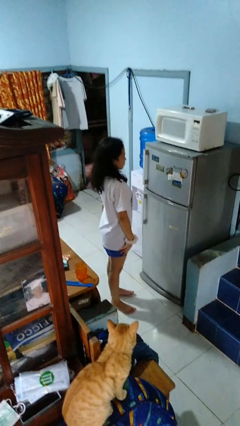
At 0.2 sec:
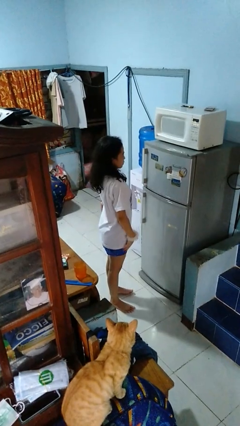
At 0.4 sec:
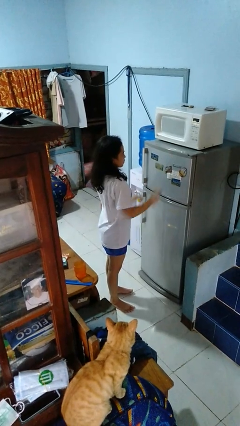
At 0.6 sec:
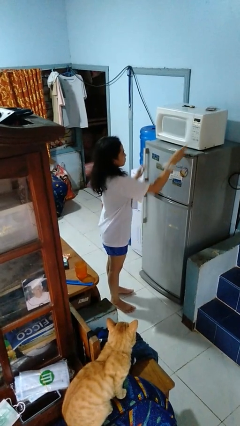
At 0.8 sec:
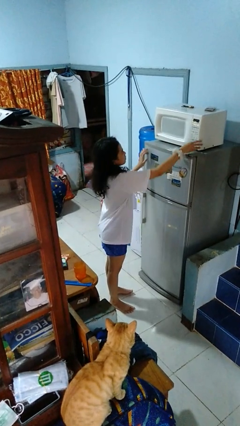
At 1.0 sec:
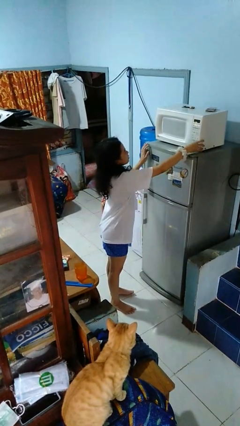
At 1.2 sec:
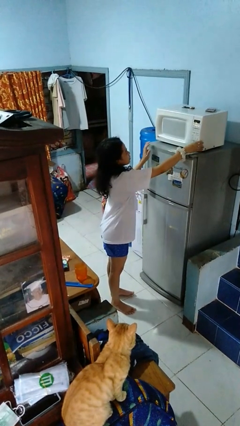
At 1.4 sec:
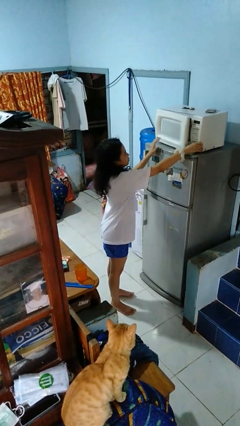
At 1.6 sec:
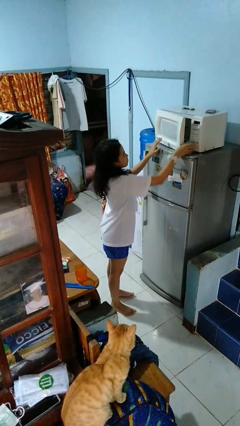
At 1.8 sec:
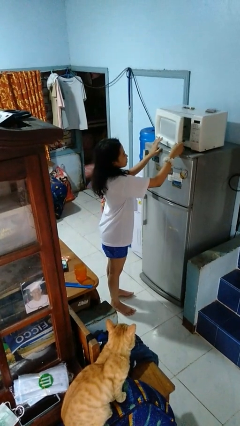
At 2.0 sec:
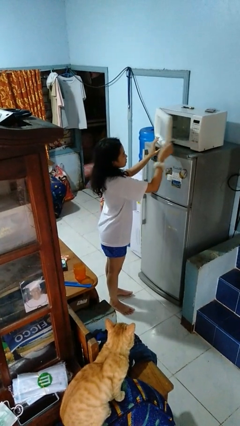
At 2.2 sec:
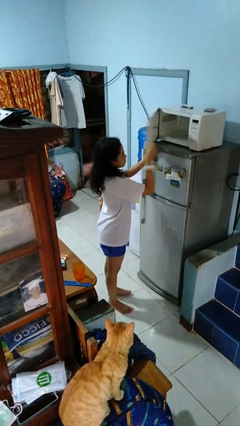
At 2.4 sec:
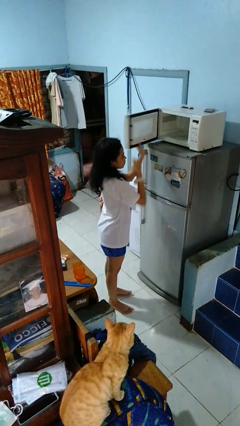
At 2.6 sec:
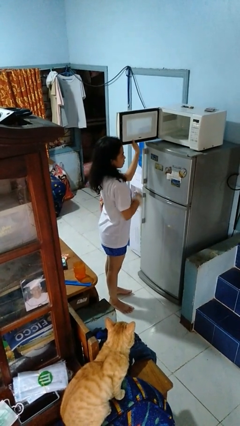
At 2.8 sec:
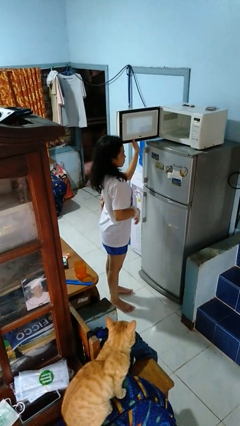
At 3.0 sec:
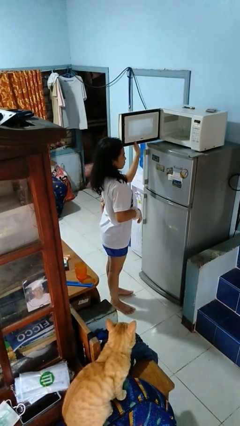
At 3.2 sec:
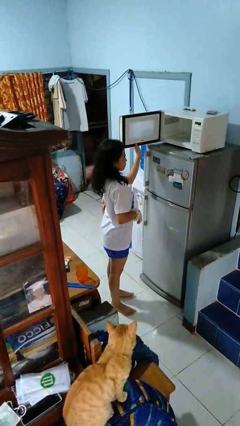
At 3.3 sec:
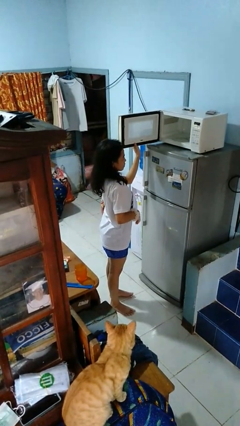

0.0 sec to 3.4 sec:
person opens microwave

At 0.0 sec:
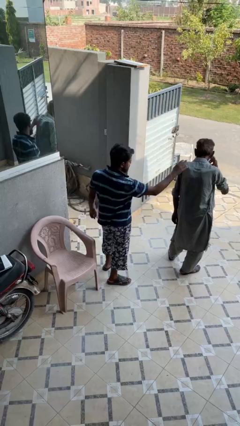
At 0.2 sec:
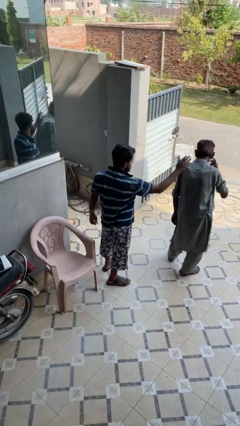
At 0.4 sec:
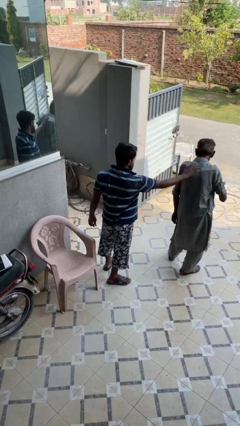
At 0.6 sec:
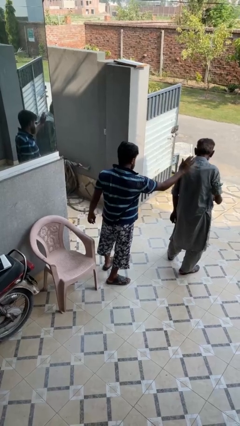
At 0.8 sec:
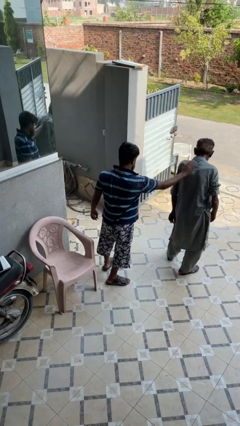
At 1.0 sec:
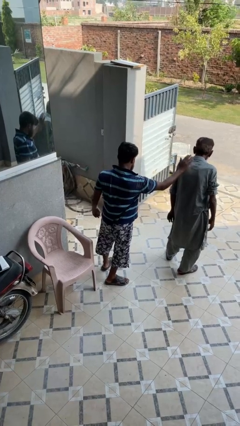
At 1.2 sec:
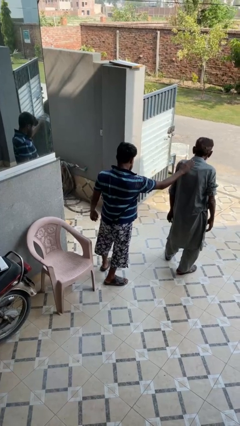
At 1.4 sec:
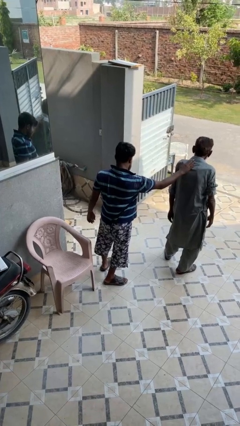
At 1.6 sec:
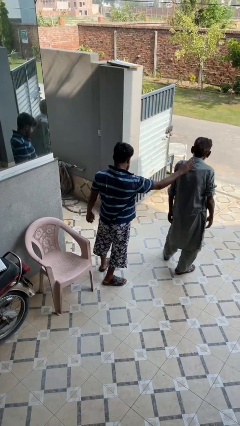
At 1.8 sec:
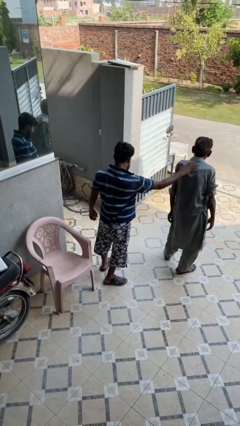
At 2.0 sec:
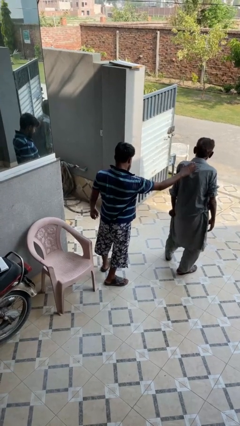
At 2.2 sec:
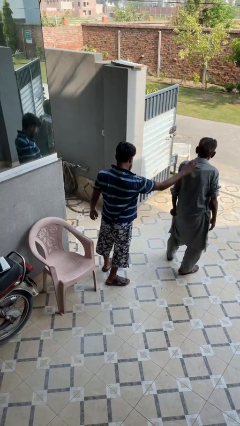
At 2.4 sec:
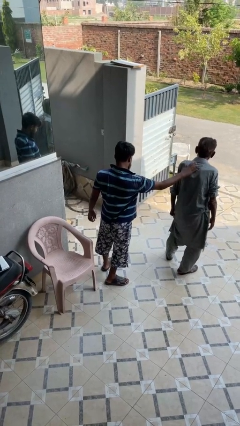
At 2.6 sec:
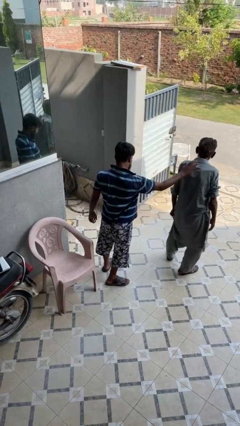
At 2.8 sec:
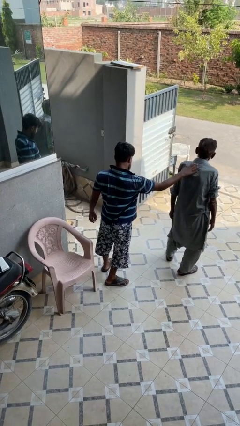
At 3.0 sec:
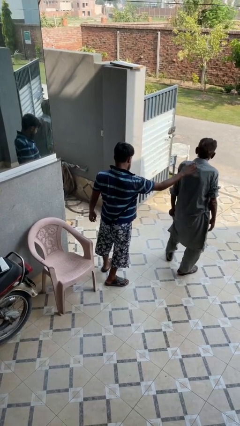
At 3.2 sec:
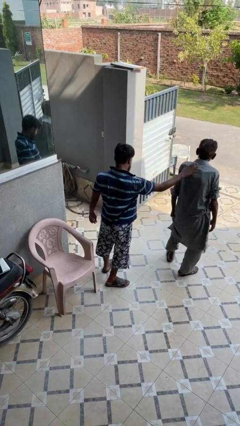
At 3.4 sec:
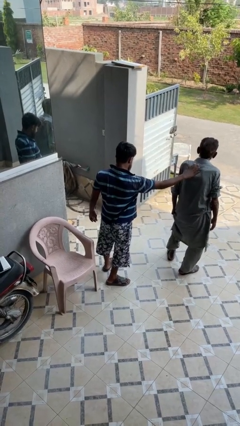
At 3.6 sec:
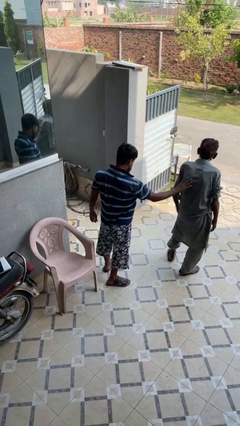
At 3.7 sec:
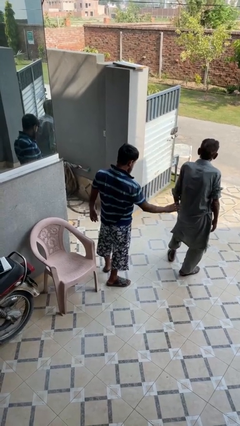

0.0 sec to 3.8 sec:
person touches back of person

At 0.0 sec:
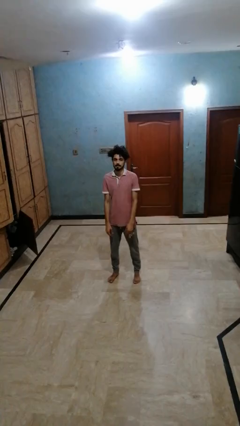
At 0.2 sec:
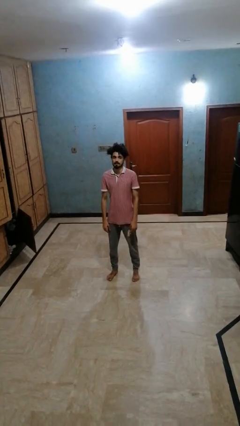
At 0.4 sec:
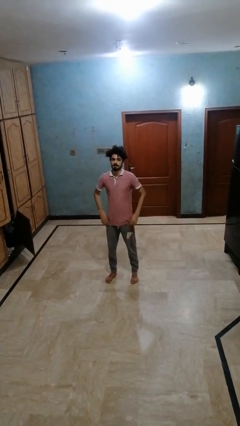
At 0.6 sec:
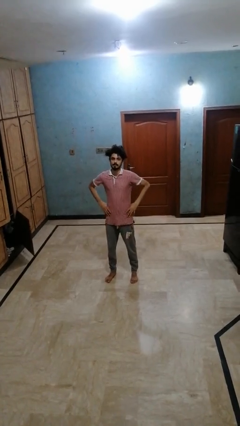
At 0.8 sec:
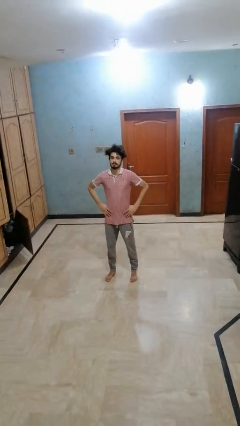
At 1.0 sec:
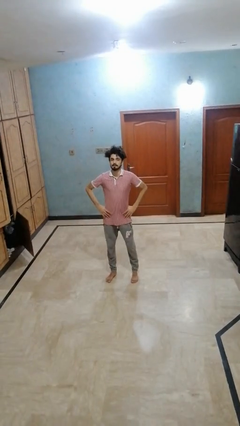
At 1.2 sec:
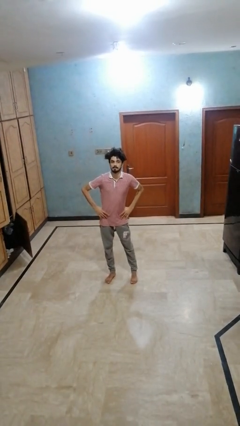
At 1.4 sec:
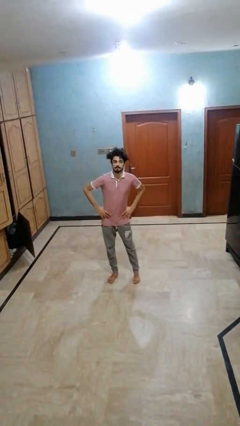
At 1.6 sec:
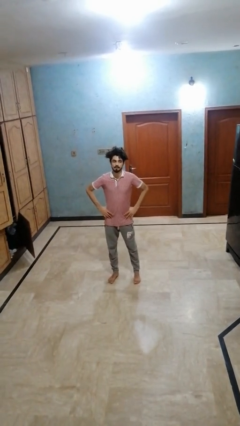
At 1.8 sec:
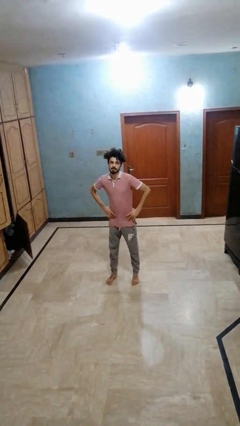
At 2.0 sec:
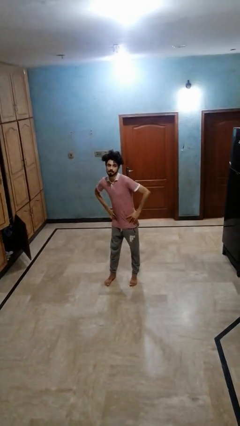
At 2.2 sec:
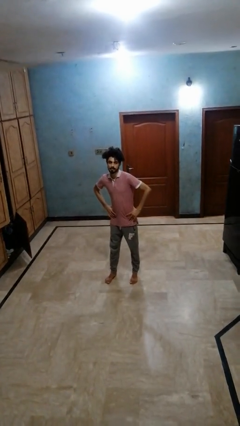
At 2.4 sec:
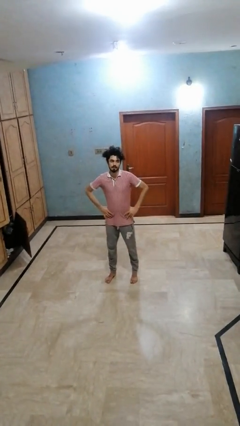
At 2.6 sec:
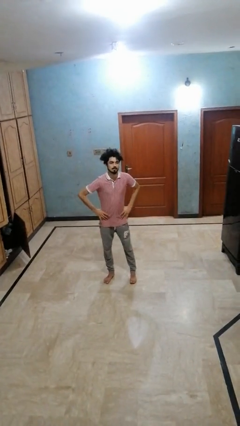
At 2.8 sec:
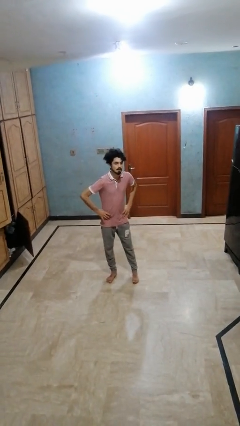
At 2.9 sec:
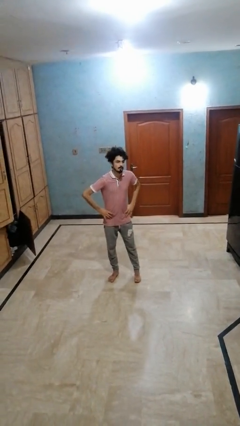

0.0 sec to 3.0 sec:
person wiggles hips

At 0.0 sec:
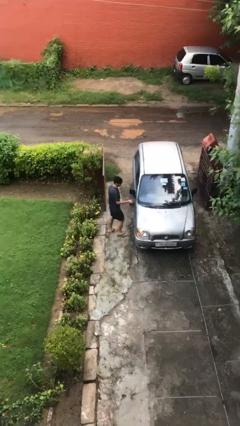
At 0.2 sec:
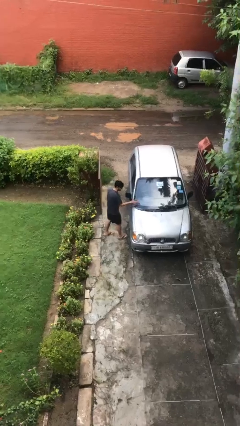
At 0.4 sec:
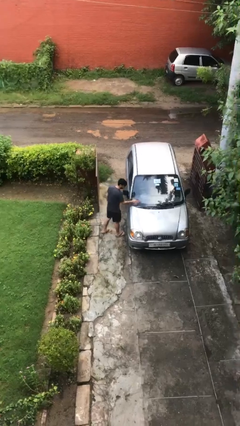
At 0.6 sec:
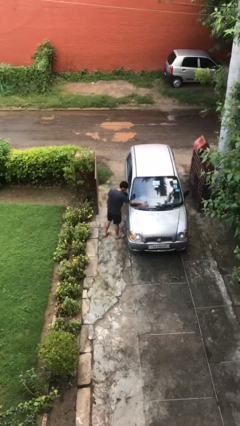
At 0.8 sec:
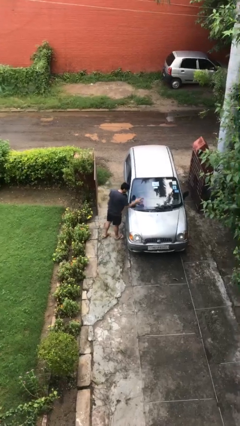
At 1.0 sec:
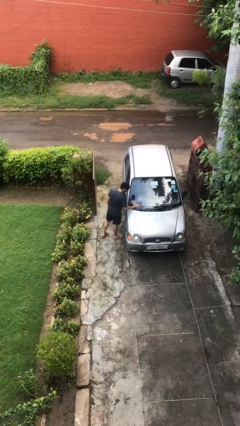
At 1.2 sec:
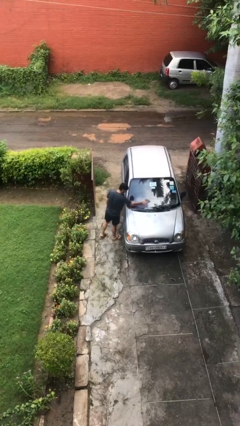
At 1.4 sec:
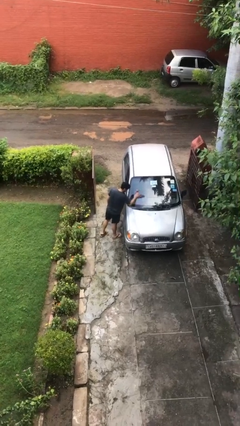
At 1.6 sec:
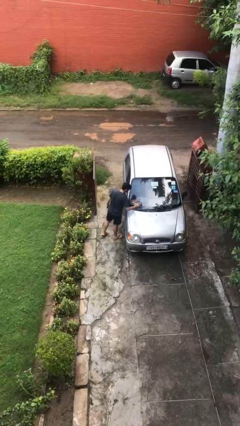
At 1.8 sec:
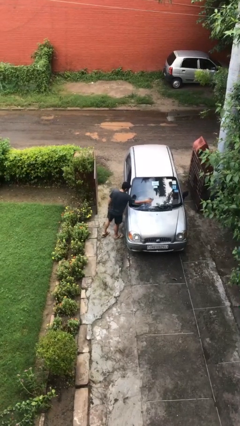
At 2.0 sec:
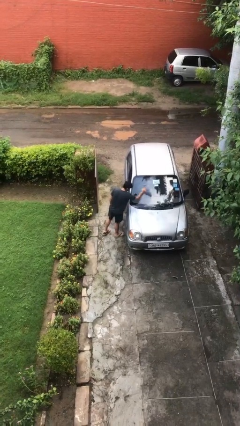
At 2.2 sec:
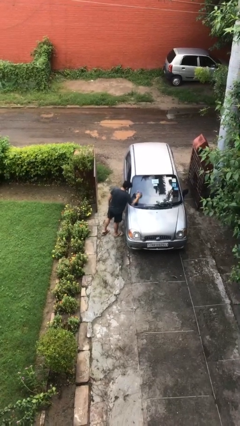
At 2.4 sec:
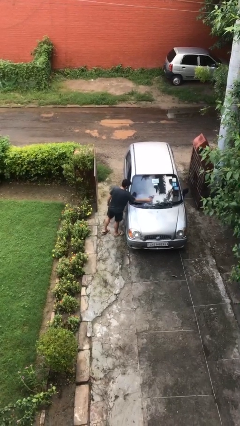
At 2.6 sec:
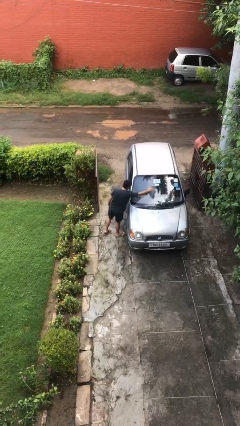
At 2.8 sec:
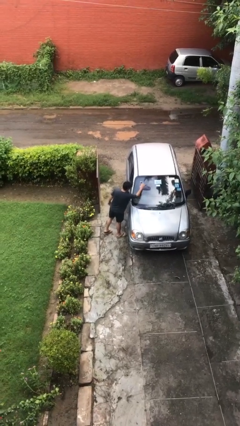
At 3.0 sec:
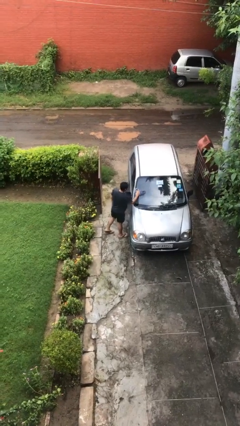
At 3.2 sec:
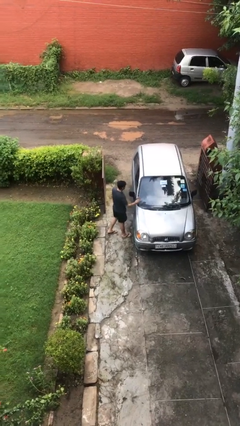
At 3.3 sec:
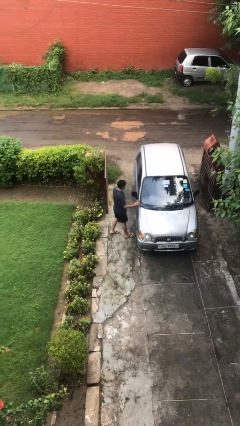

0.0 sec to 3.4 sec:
person polishes car with rag

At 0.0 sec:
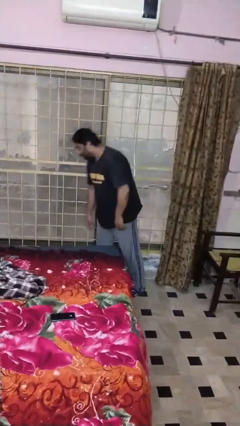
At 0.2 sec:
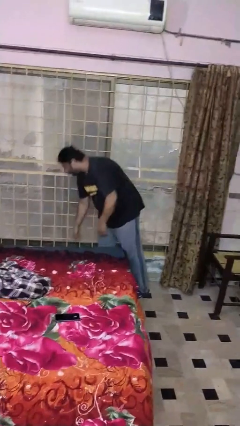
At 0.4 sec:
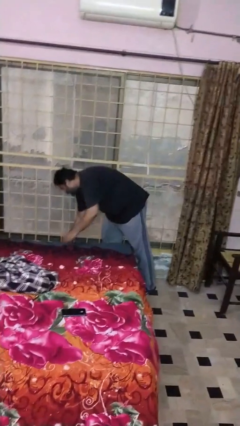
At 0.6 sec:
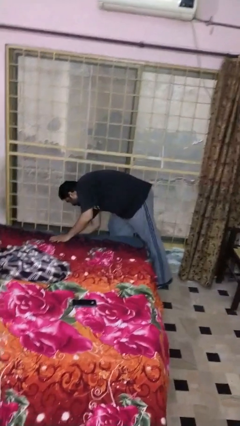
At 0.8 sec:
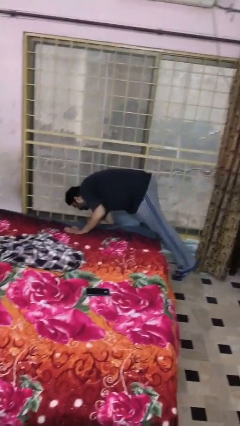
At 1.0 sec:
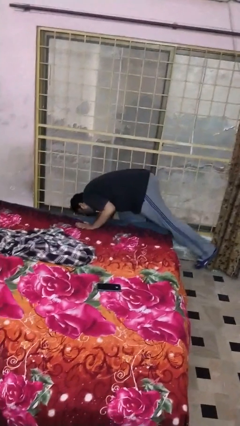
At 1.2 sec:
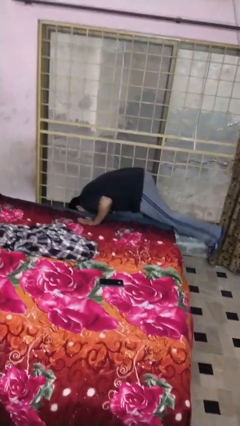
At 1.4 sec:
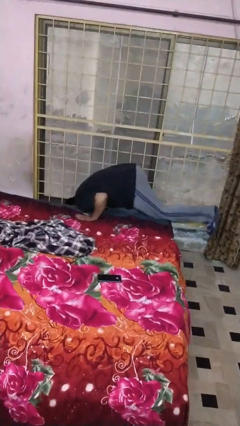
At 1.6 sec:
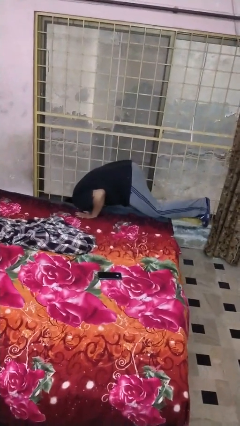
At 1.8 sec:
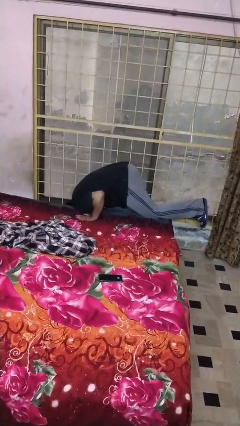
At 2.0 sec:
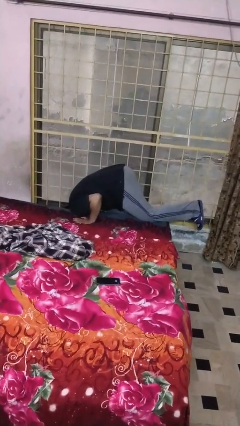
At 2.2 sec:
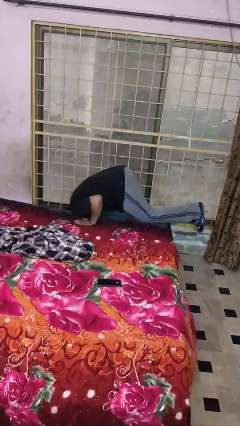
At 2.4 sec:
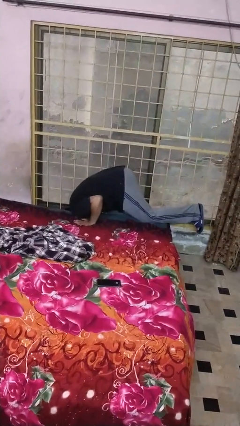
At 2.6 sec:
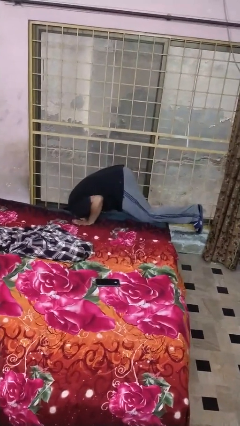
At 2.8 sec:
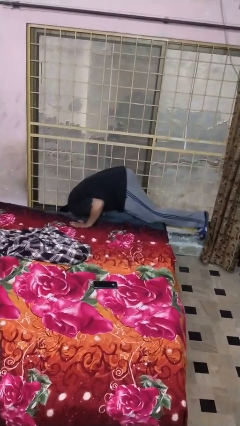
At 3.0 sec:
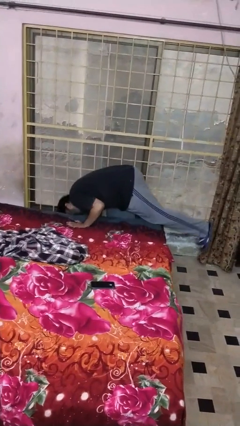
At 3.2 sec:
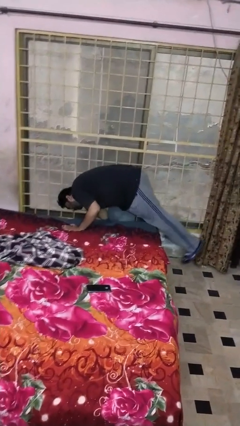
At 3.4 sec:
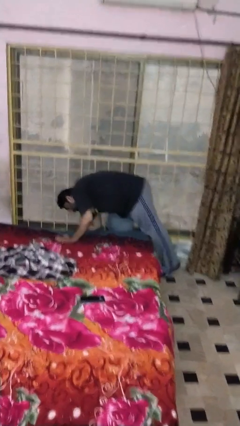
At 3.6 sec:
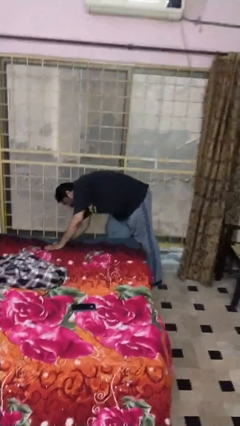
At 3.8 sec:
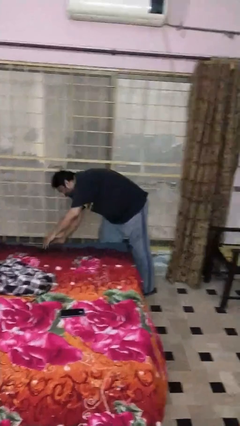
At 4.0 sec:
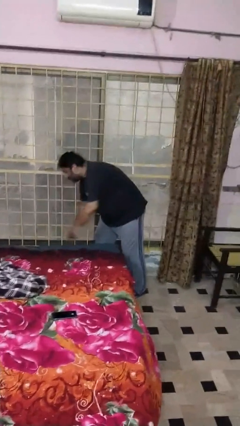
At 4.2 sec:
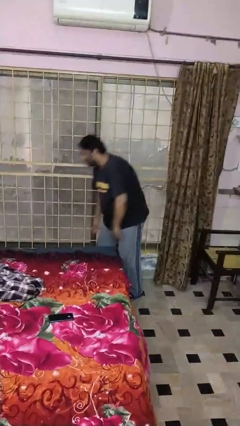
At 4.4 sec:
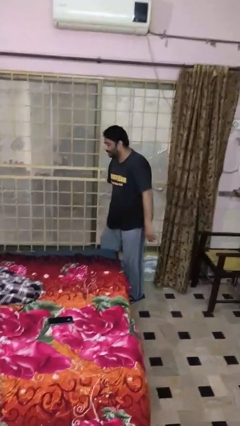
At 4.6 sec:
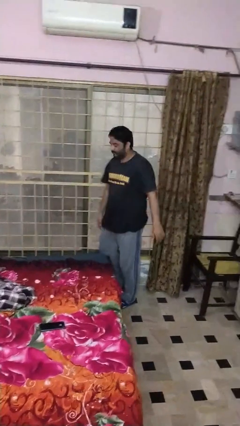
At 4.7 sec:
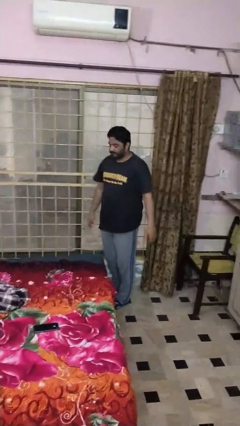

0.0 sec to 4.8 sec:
person searches under bed
